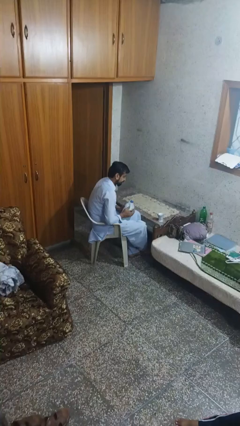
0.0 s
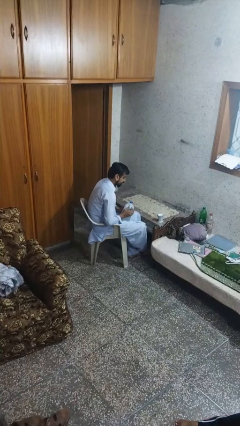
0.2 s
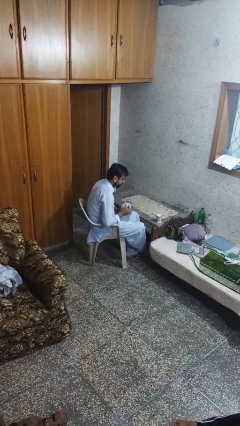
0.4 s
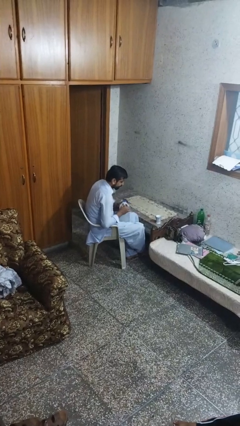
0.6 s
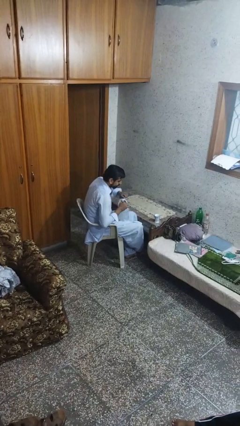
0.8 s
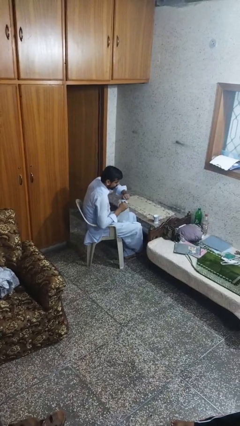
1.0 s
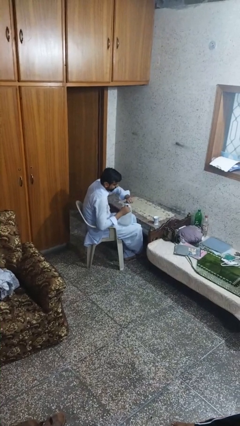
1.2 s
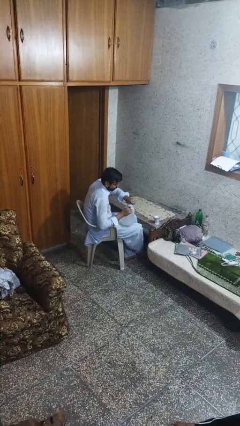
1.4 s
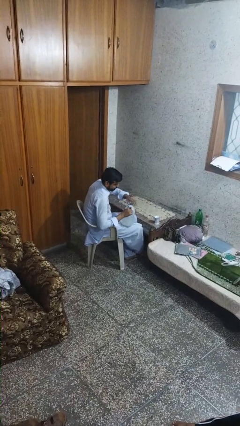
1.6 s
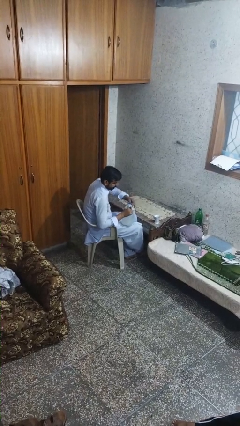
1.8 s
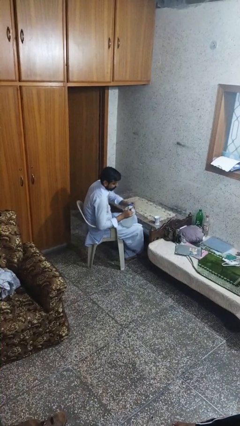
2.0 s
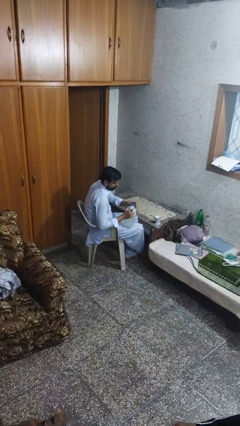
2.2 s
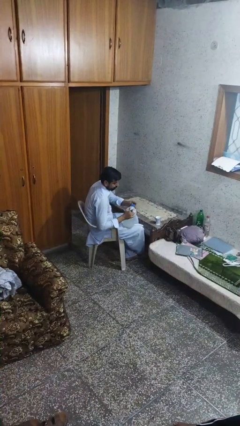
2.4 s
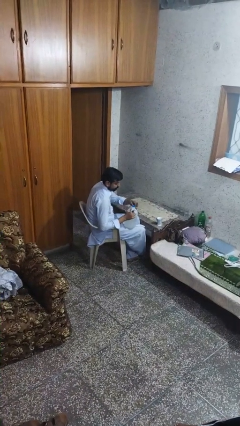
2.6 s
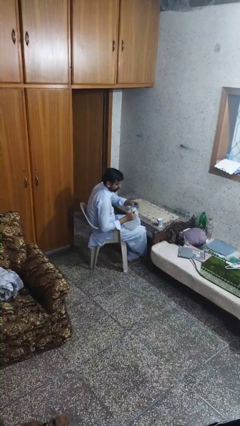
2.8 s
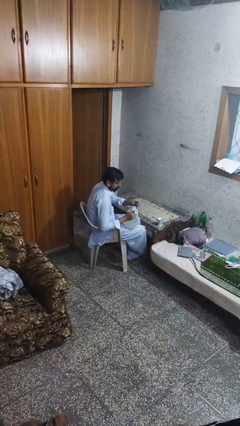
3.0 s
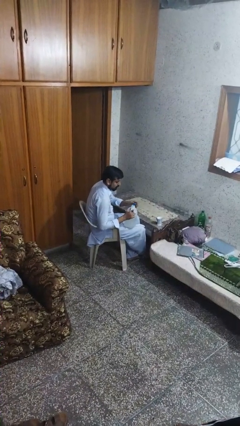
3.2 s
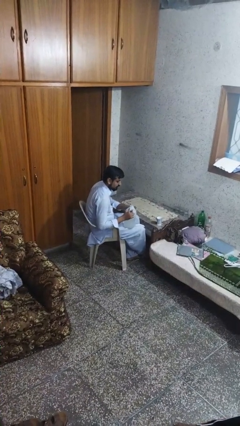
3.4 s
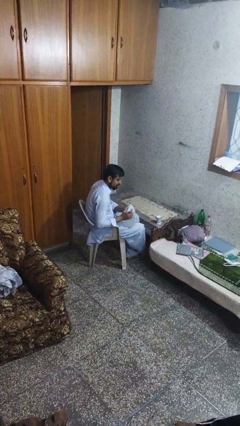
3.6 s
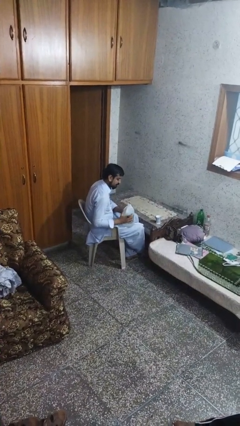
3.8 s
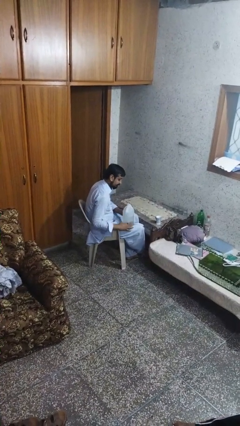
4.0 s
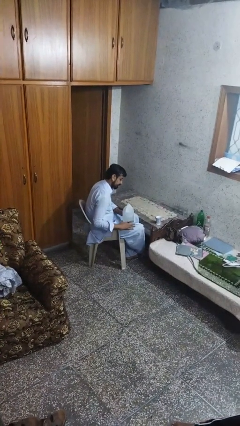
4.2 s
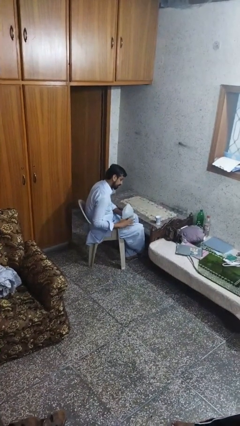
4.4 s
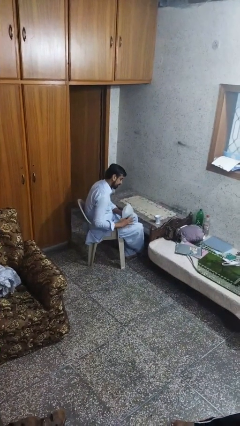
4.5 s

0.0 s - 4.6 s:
person unscrews lid from bottle

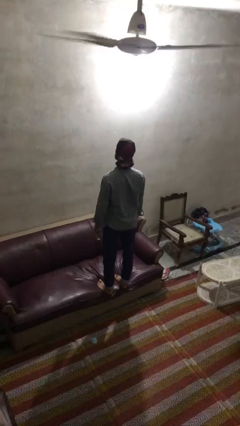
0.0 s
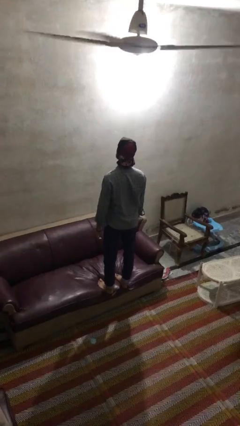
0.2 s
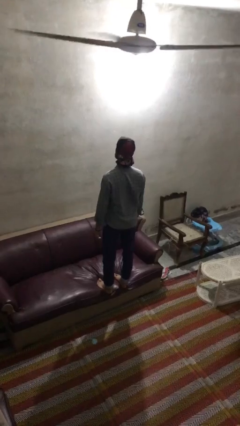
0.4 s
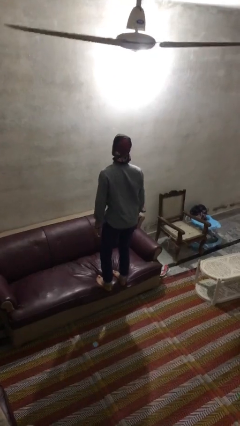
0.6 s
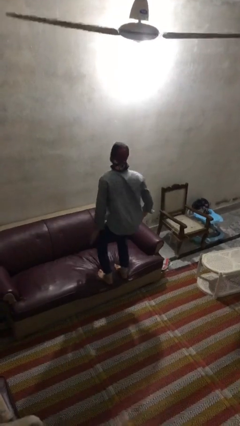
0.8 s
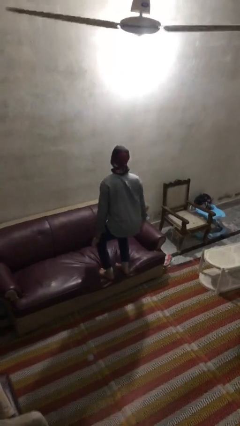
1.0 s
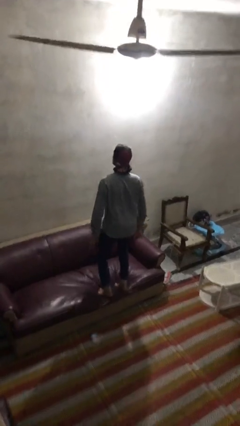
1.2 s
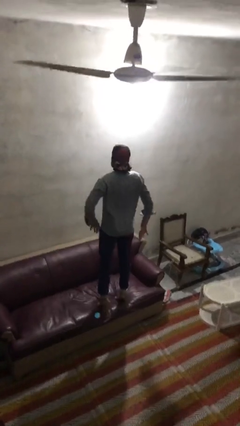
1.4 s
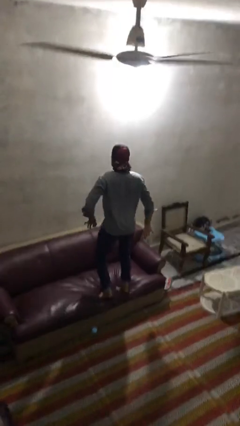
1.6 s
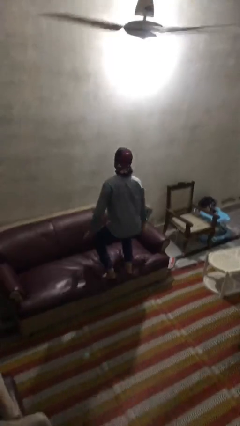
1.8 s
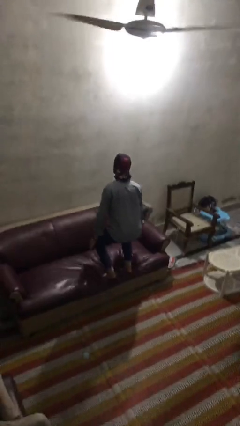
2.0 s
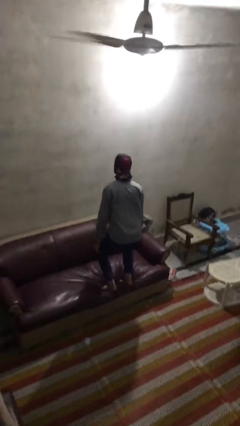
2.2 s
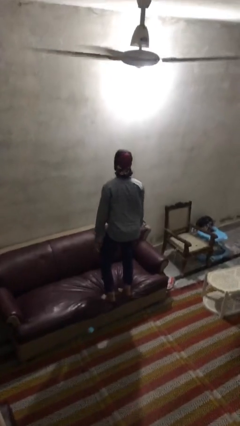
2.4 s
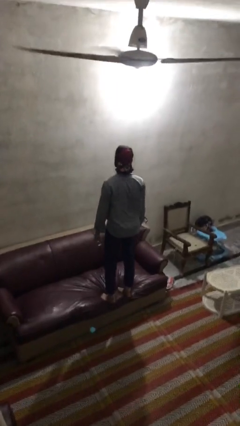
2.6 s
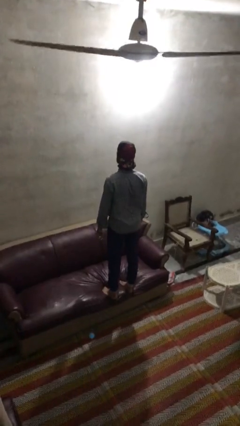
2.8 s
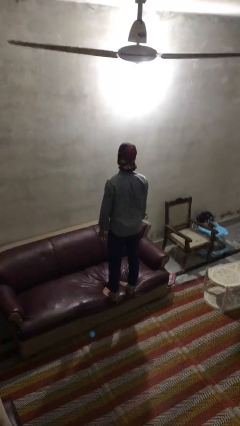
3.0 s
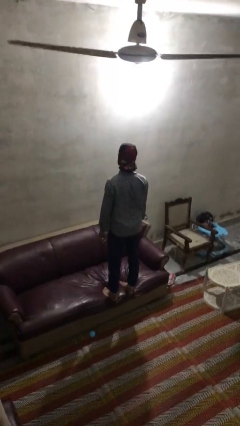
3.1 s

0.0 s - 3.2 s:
person jumps on couch

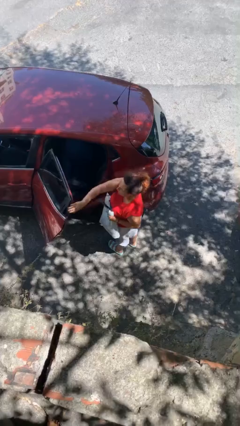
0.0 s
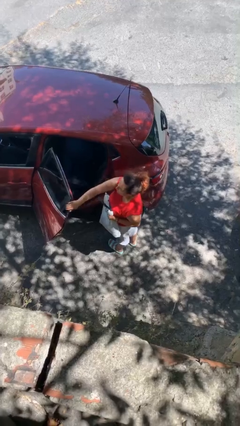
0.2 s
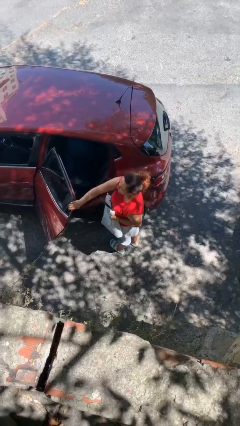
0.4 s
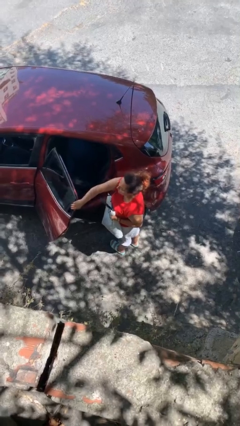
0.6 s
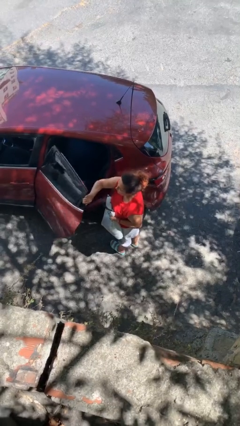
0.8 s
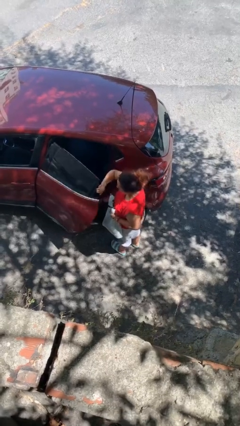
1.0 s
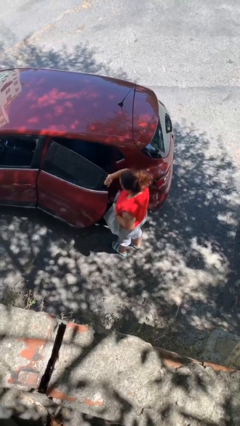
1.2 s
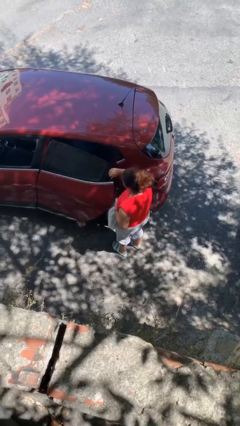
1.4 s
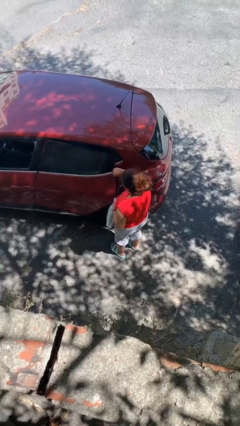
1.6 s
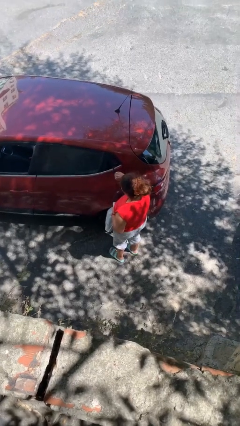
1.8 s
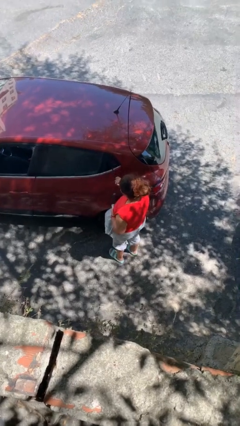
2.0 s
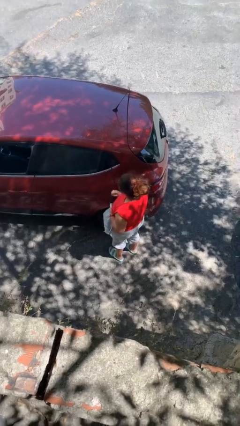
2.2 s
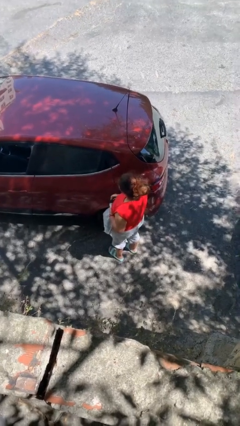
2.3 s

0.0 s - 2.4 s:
person closes car door

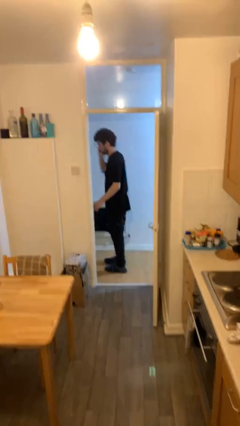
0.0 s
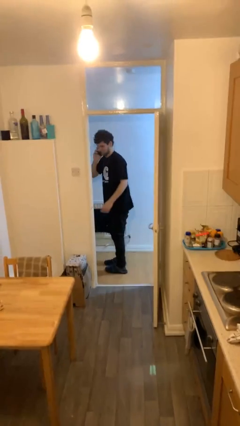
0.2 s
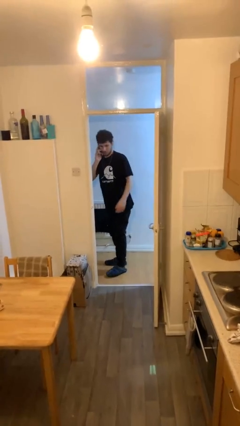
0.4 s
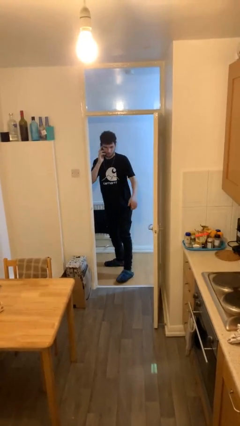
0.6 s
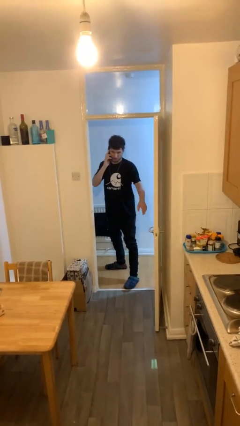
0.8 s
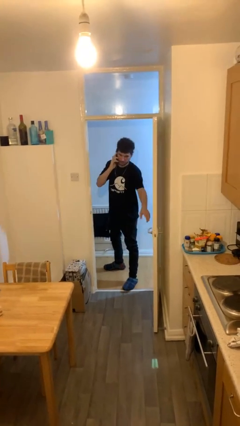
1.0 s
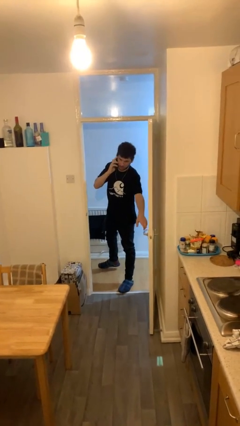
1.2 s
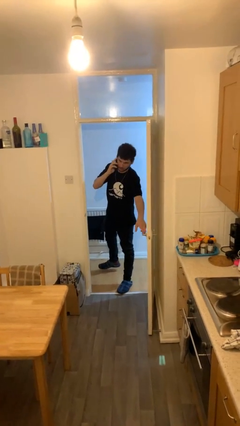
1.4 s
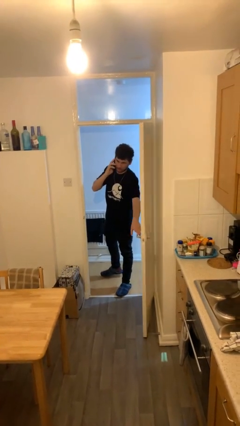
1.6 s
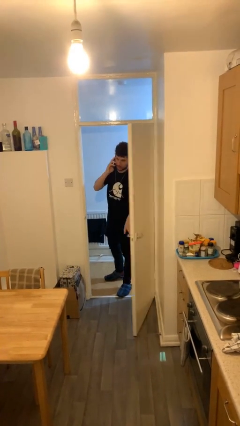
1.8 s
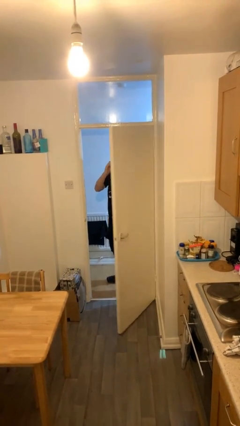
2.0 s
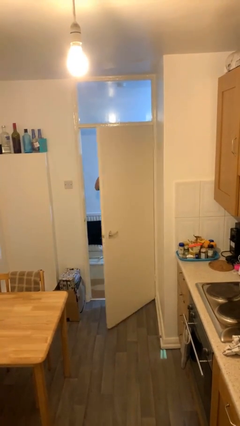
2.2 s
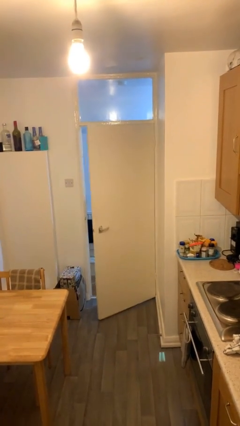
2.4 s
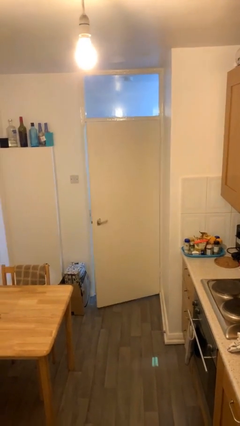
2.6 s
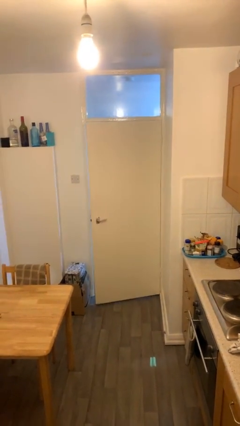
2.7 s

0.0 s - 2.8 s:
person closes facility door

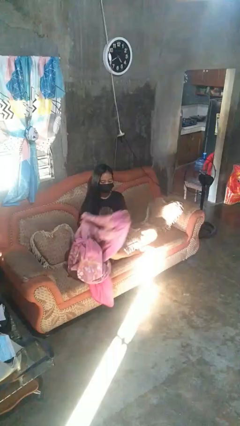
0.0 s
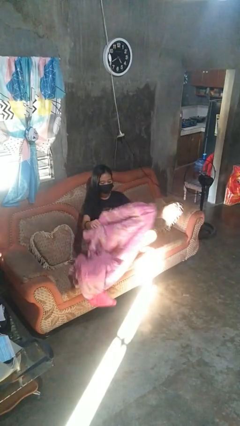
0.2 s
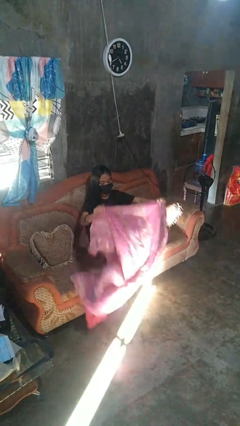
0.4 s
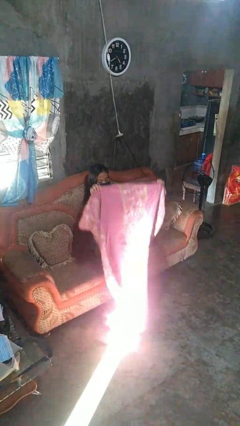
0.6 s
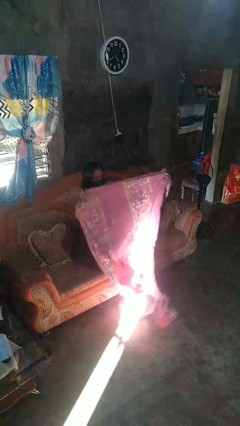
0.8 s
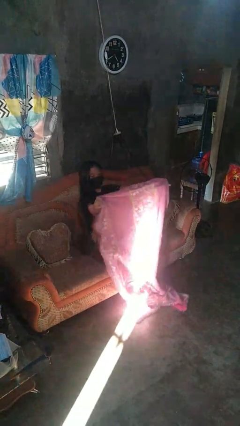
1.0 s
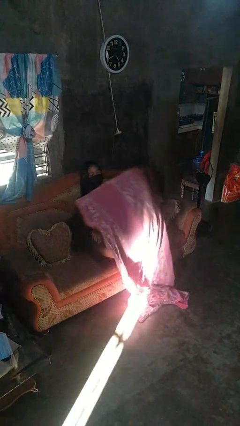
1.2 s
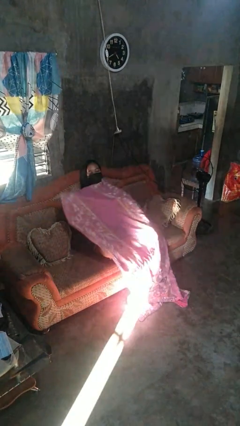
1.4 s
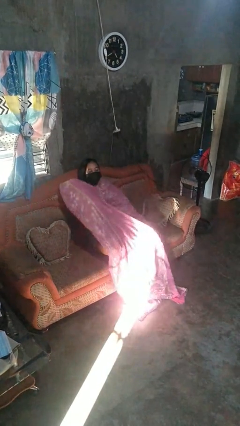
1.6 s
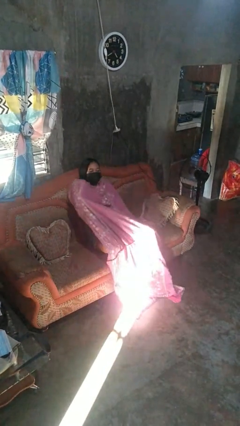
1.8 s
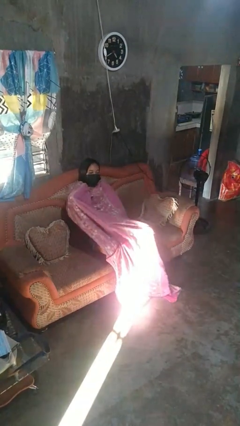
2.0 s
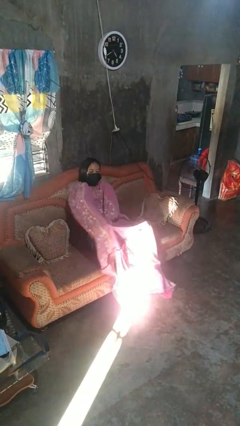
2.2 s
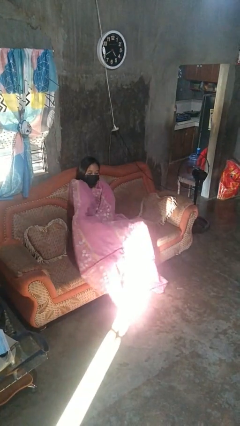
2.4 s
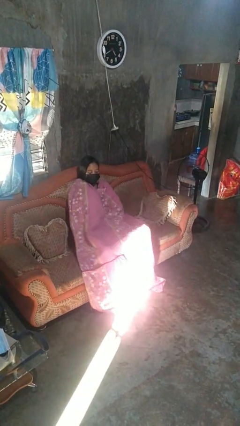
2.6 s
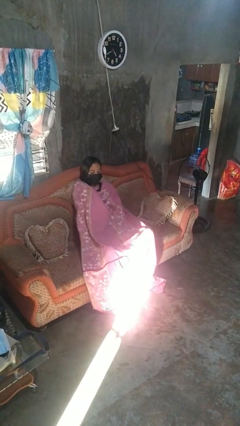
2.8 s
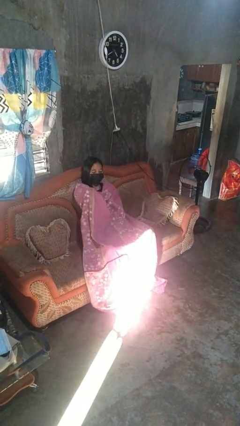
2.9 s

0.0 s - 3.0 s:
person covers with blanket

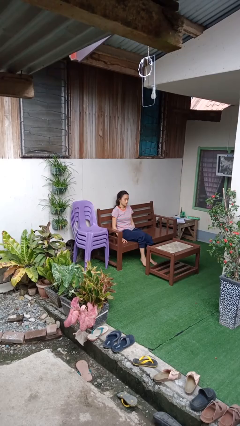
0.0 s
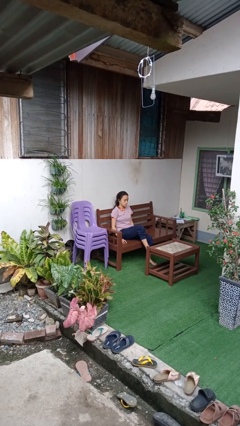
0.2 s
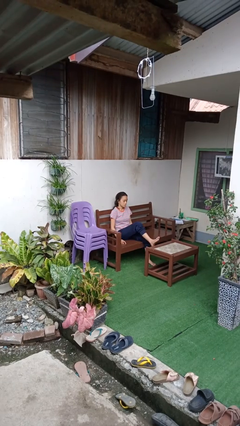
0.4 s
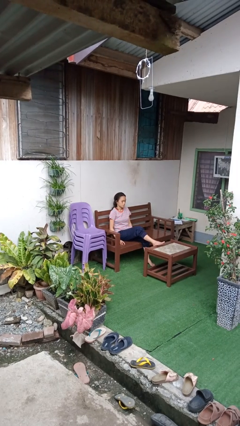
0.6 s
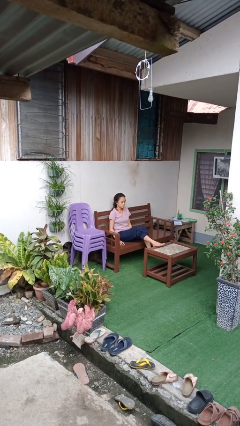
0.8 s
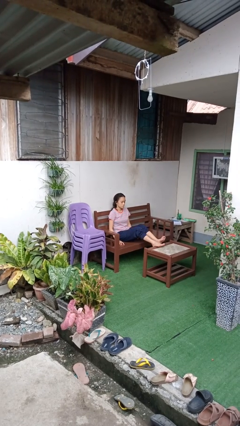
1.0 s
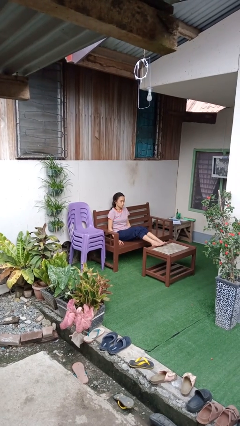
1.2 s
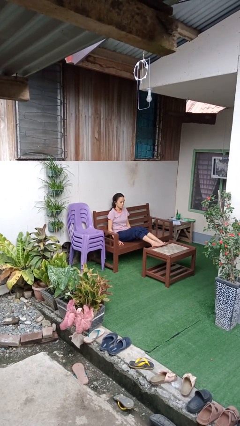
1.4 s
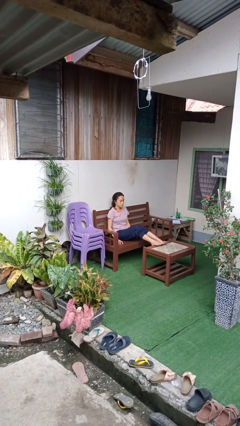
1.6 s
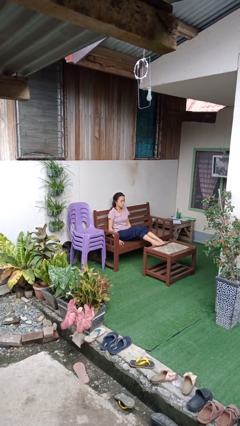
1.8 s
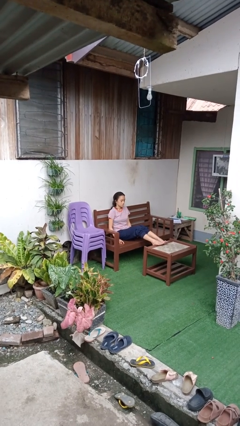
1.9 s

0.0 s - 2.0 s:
person puts feet up
